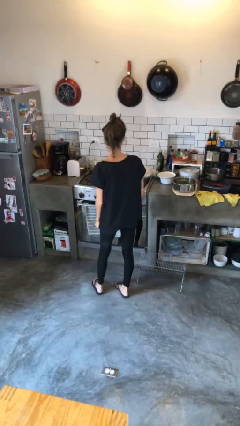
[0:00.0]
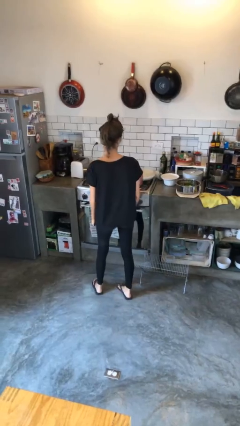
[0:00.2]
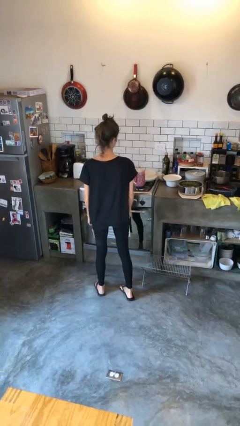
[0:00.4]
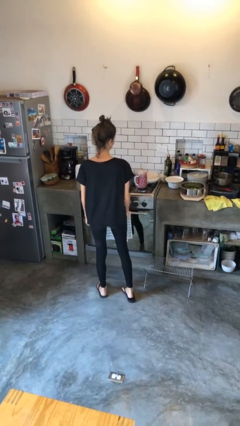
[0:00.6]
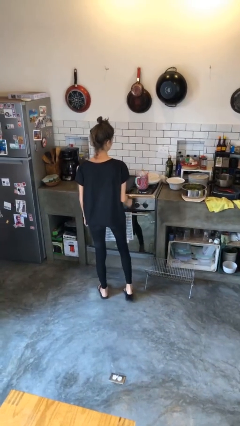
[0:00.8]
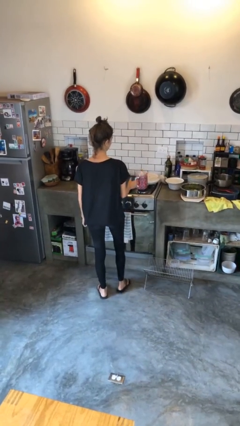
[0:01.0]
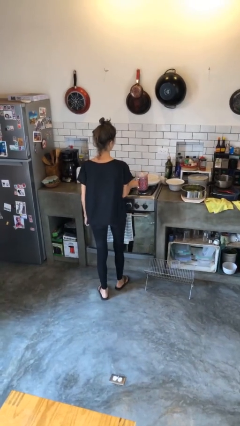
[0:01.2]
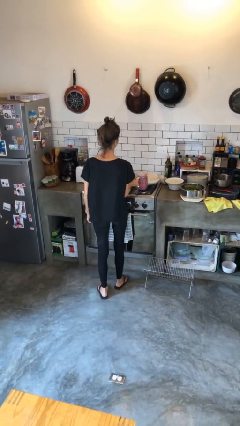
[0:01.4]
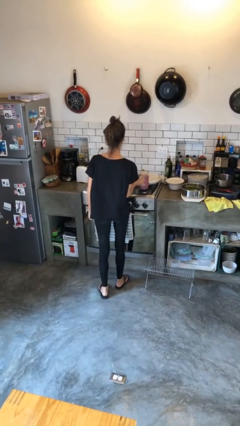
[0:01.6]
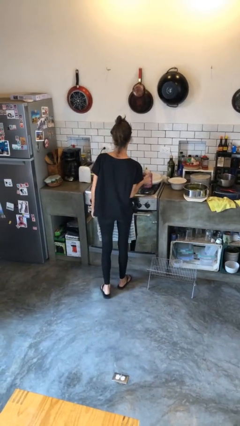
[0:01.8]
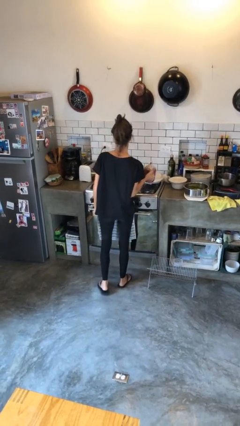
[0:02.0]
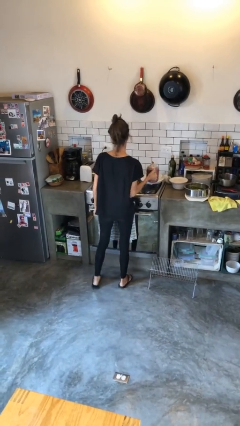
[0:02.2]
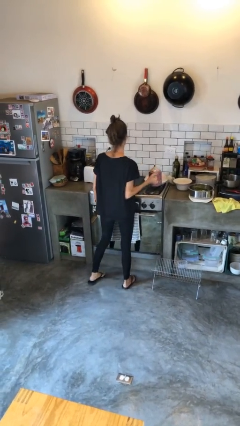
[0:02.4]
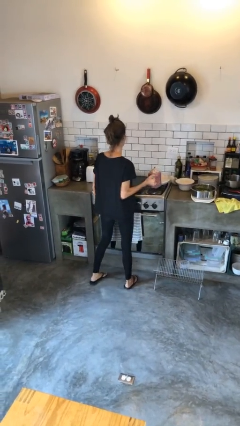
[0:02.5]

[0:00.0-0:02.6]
person picks up object from countertop

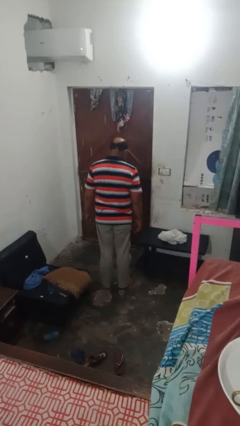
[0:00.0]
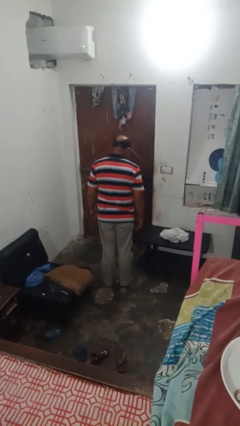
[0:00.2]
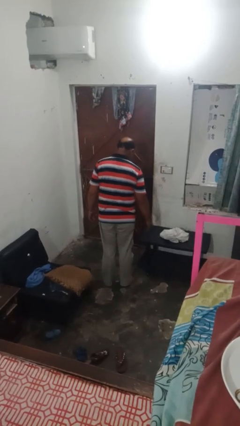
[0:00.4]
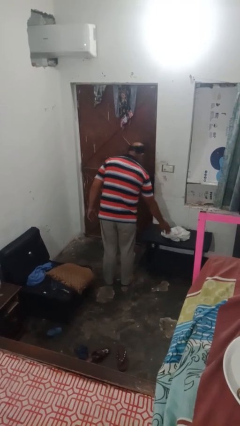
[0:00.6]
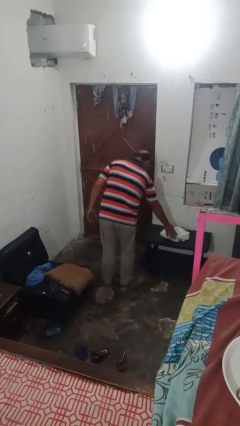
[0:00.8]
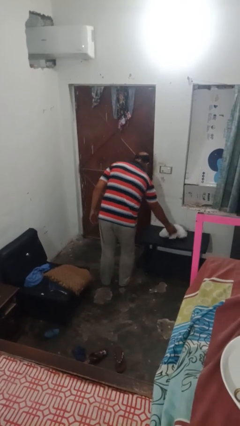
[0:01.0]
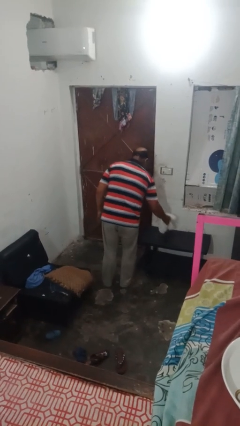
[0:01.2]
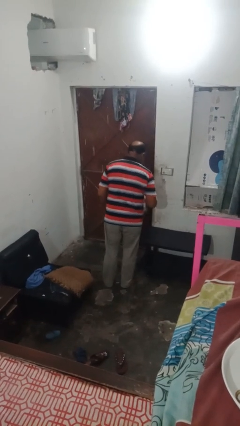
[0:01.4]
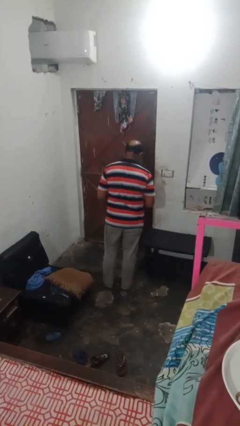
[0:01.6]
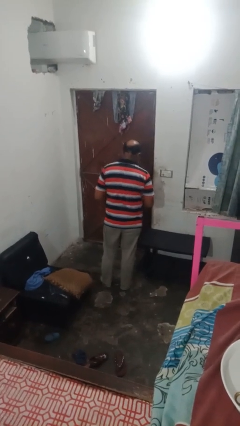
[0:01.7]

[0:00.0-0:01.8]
person picks up object from table

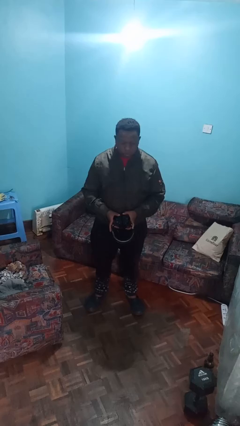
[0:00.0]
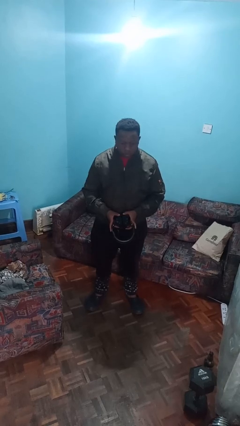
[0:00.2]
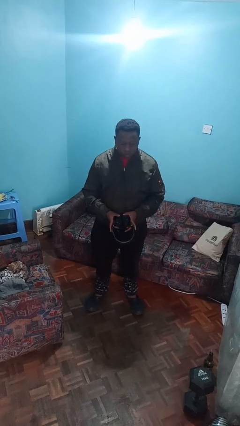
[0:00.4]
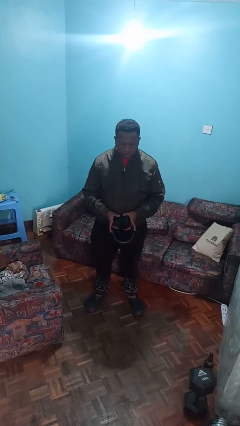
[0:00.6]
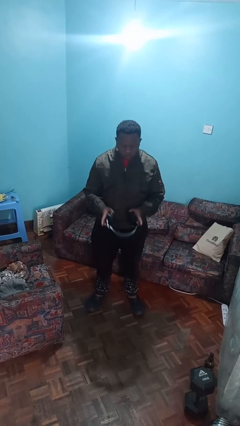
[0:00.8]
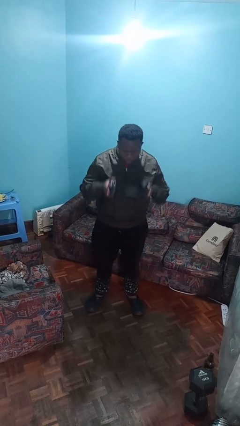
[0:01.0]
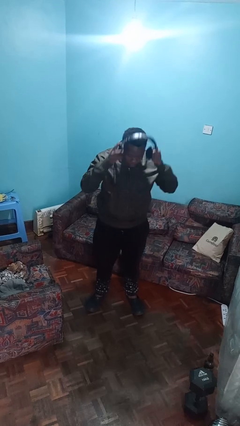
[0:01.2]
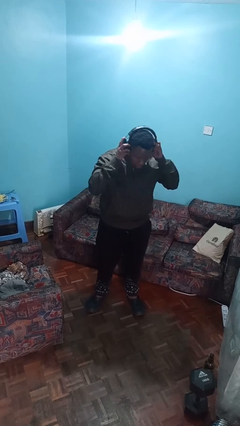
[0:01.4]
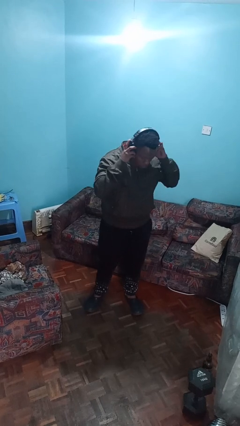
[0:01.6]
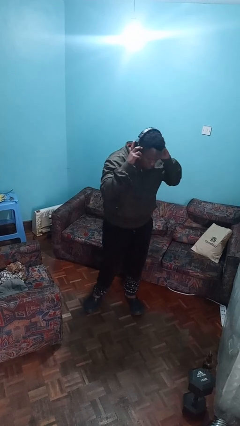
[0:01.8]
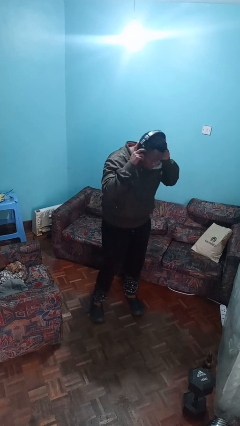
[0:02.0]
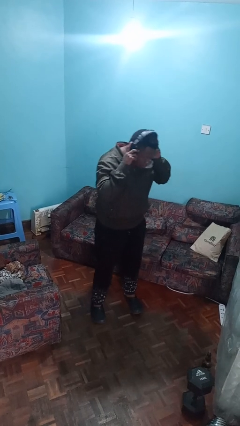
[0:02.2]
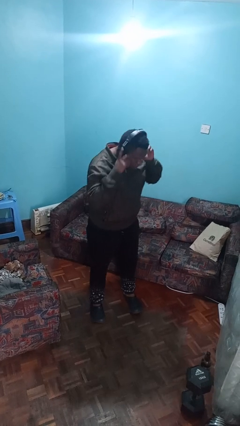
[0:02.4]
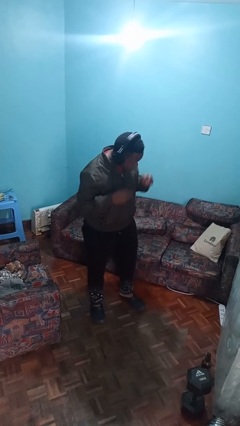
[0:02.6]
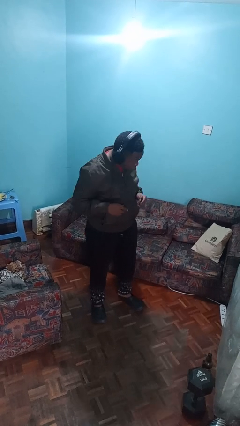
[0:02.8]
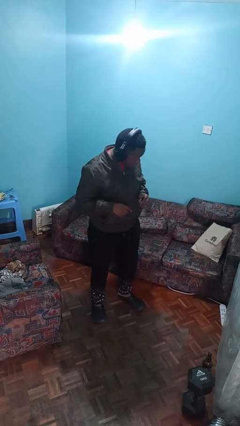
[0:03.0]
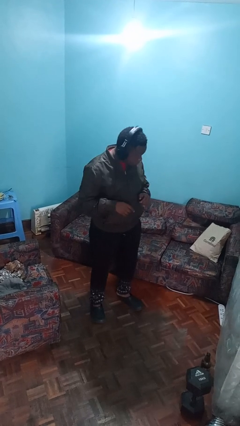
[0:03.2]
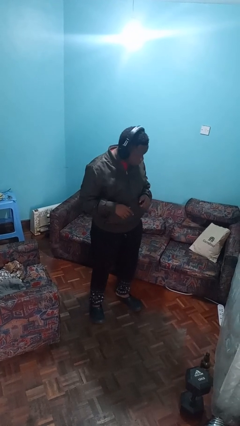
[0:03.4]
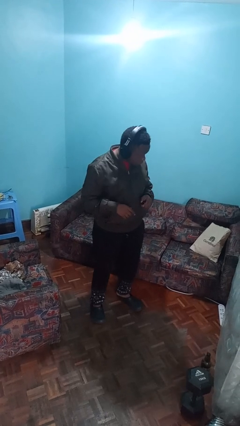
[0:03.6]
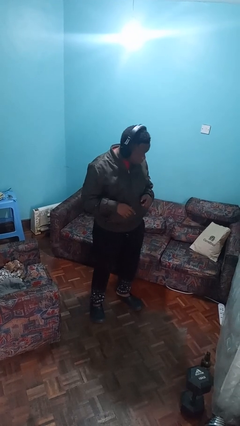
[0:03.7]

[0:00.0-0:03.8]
person puts on headphones

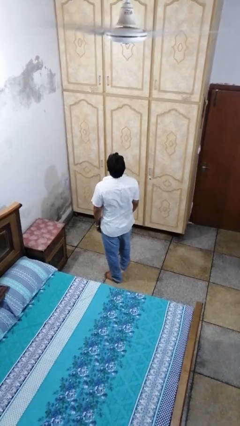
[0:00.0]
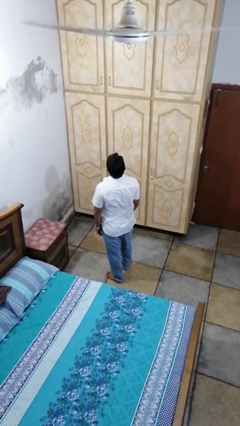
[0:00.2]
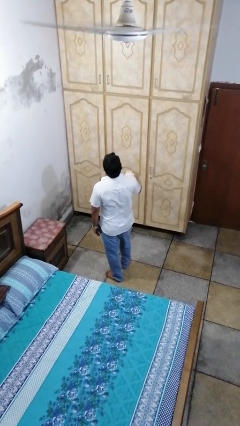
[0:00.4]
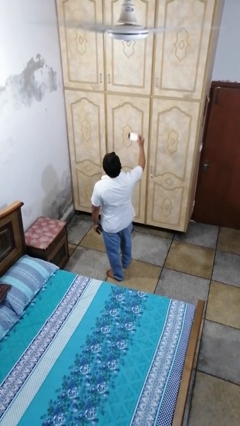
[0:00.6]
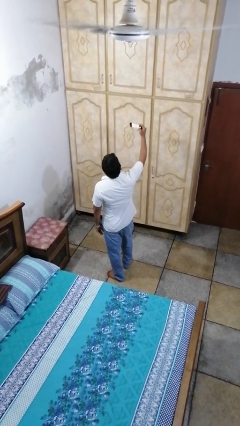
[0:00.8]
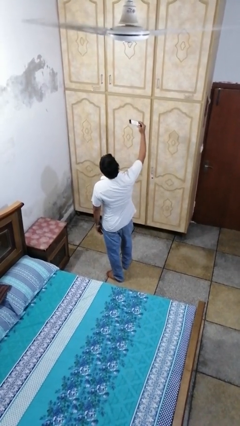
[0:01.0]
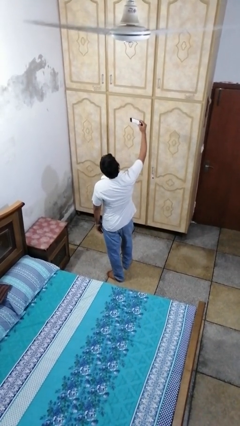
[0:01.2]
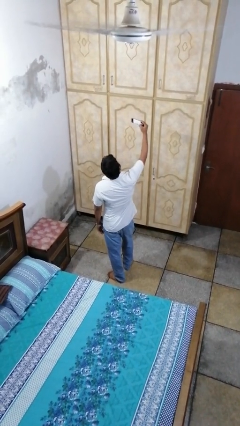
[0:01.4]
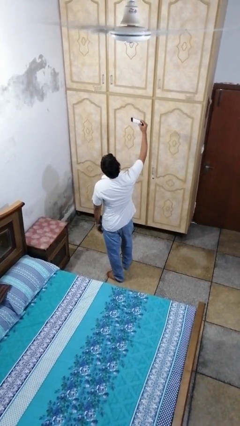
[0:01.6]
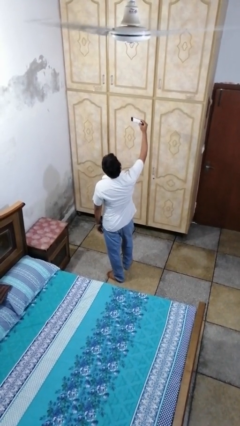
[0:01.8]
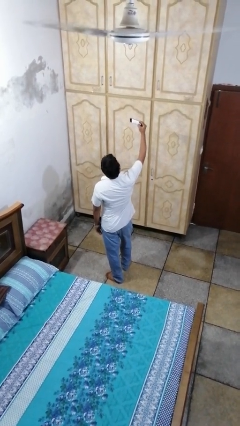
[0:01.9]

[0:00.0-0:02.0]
person takes selfie

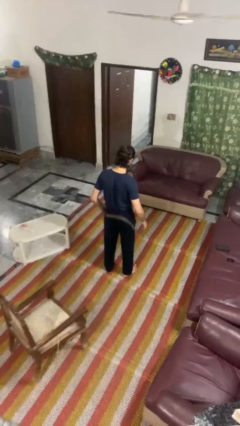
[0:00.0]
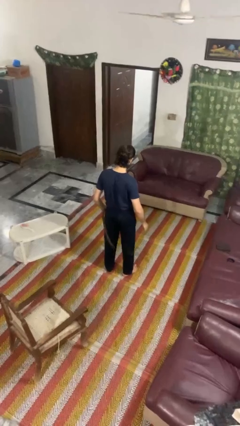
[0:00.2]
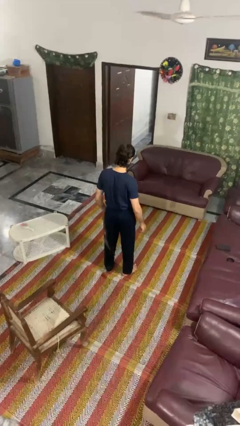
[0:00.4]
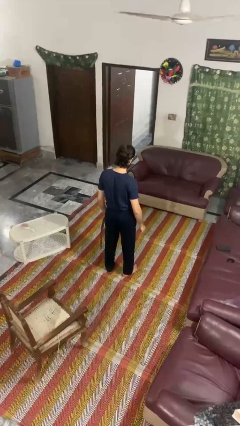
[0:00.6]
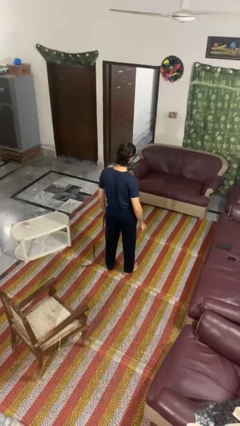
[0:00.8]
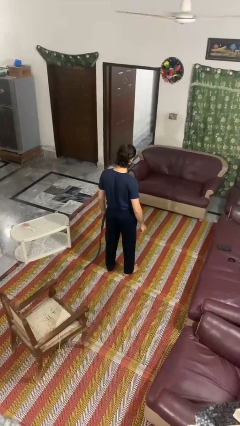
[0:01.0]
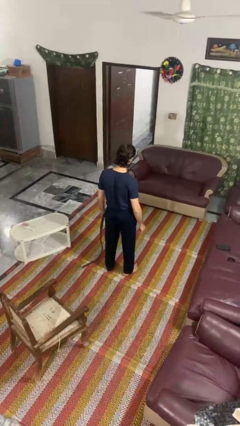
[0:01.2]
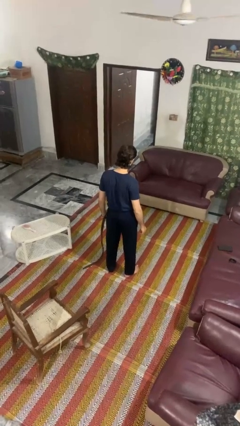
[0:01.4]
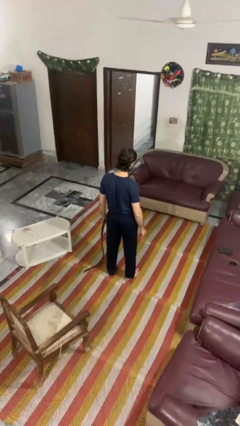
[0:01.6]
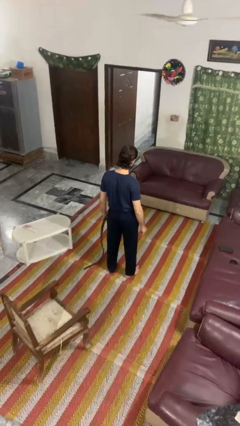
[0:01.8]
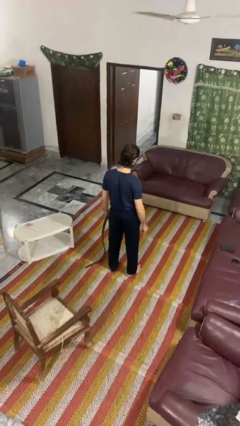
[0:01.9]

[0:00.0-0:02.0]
person takes off belt

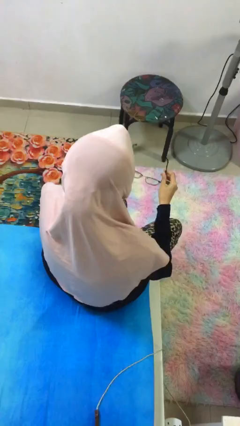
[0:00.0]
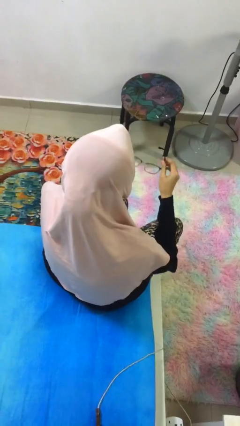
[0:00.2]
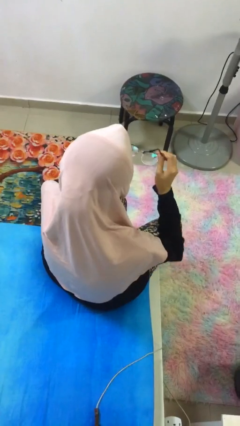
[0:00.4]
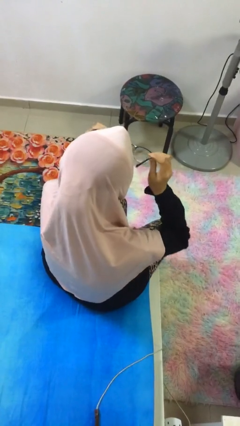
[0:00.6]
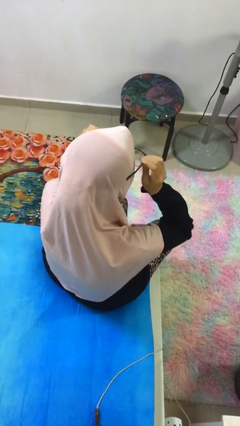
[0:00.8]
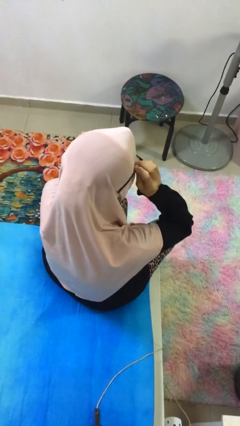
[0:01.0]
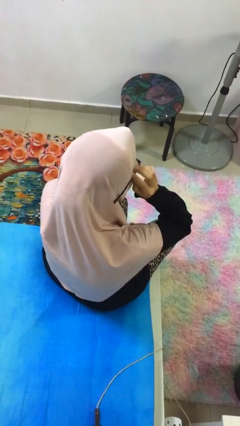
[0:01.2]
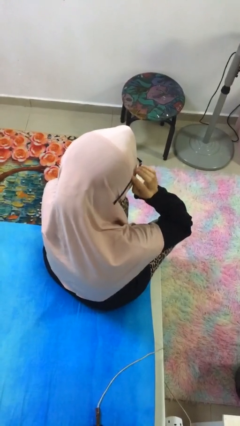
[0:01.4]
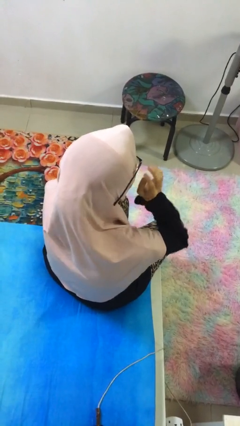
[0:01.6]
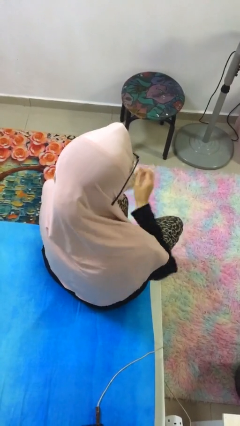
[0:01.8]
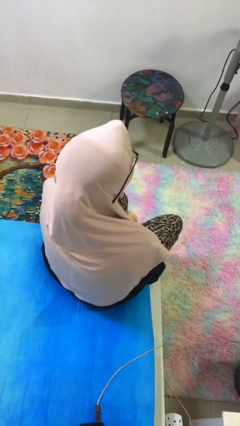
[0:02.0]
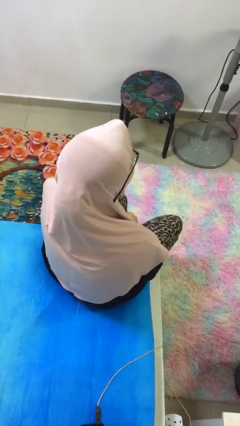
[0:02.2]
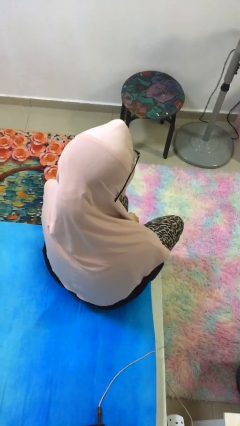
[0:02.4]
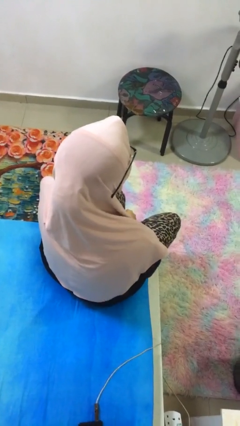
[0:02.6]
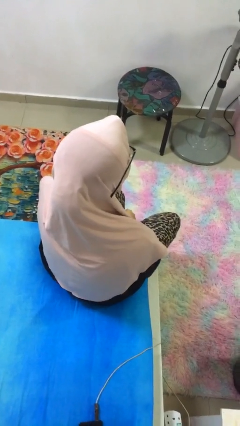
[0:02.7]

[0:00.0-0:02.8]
person puts on glasses

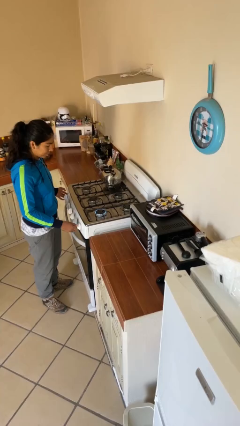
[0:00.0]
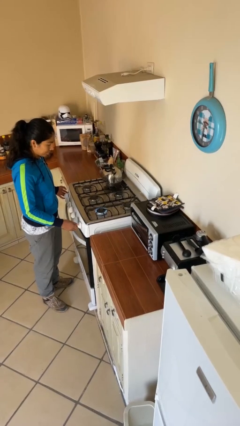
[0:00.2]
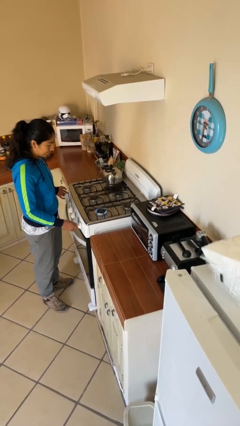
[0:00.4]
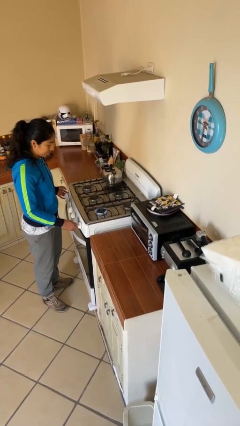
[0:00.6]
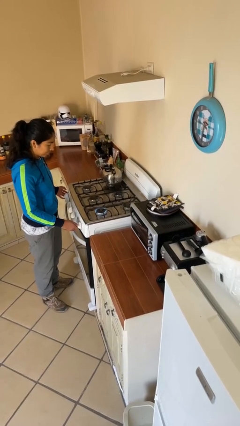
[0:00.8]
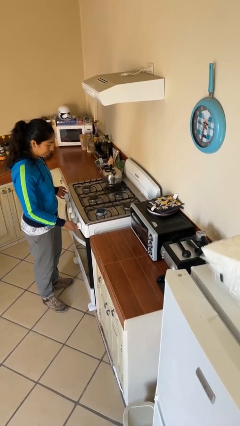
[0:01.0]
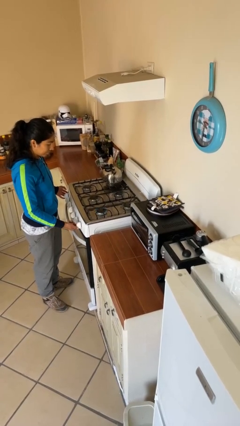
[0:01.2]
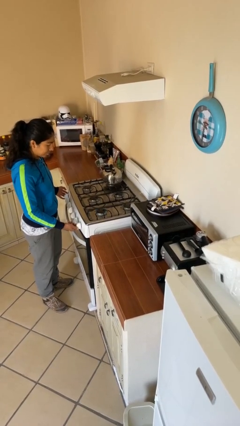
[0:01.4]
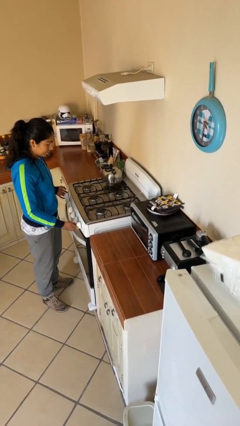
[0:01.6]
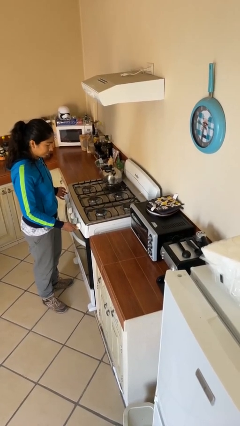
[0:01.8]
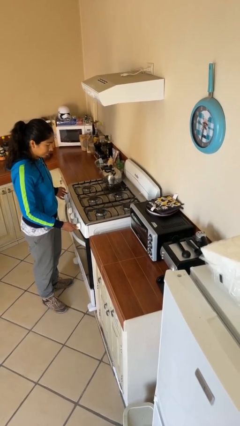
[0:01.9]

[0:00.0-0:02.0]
person turns off stovetop
